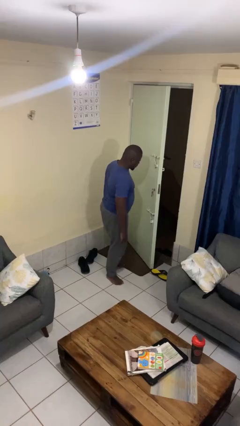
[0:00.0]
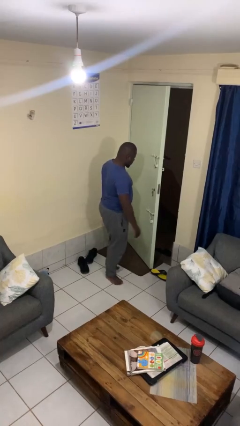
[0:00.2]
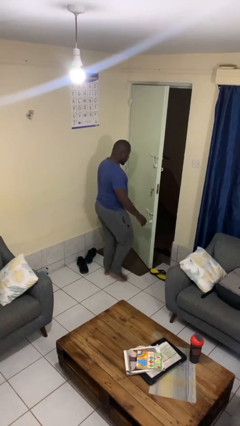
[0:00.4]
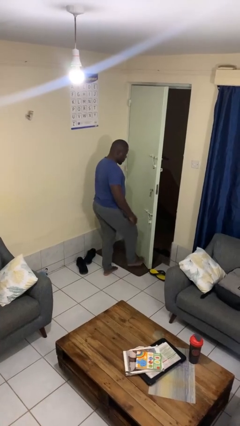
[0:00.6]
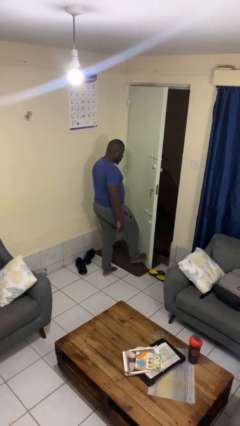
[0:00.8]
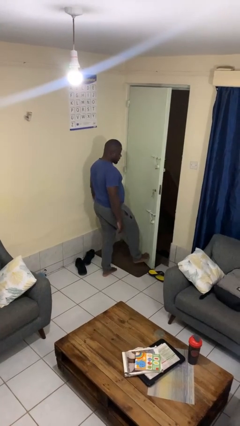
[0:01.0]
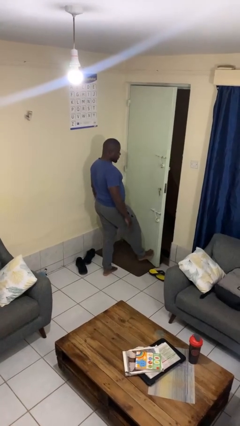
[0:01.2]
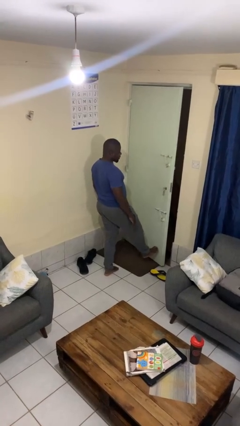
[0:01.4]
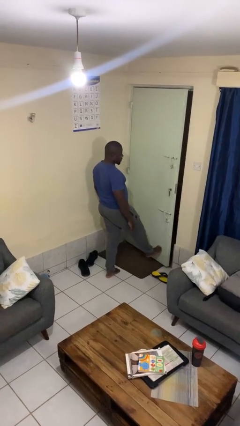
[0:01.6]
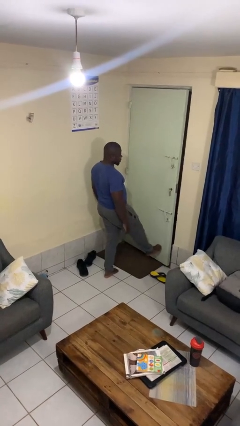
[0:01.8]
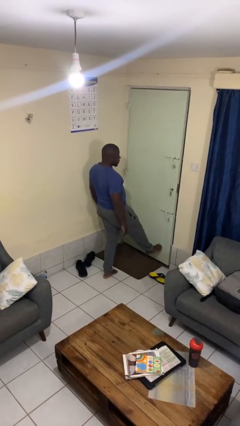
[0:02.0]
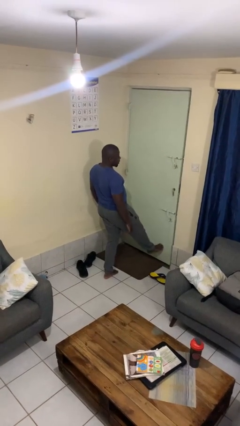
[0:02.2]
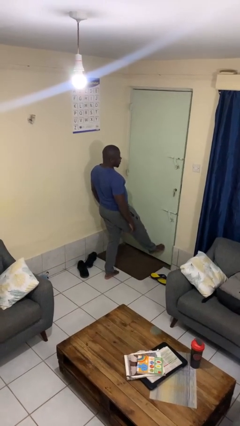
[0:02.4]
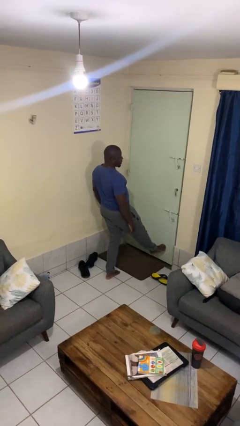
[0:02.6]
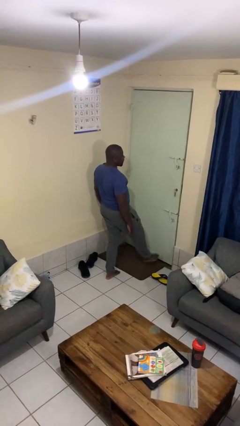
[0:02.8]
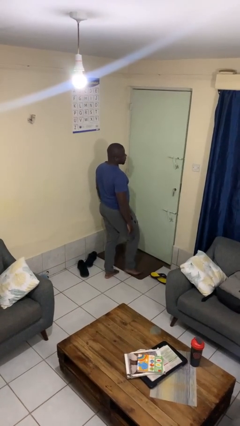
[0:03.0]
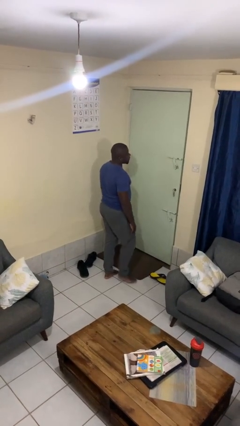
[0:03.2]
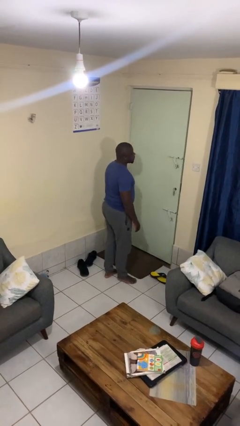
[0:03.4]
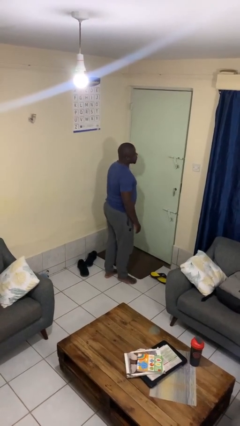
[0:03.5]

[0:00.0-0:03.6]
person closes door with foot

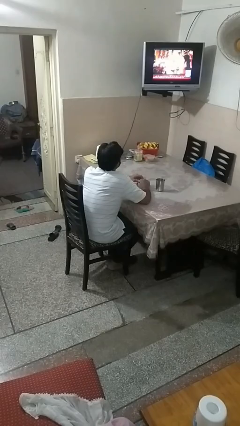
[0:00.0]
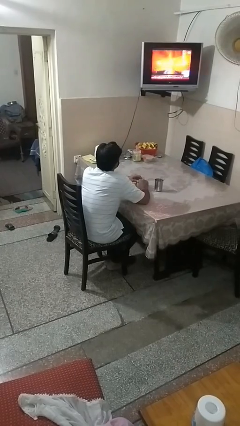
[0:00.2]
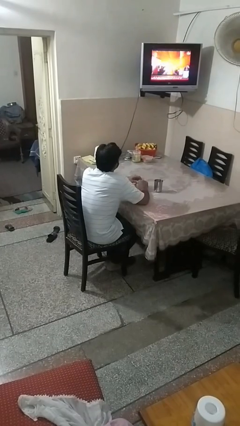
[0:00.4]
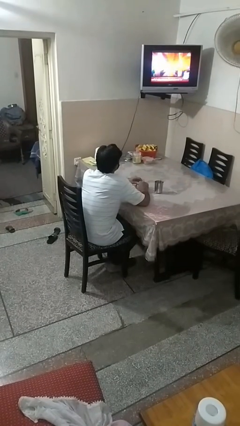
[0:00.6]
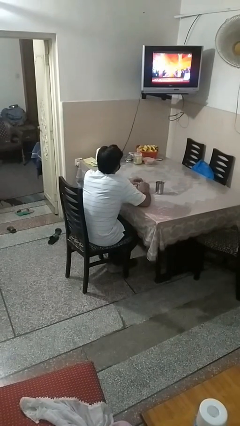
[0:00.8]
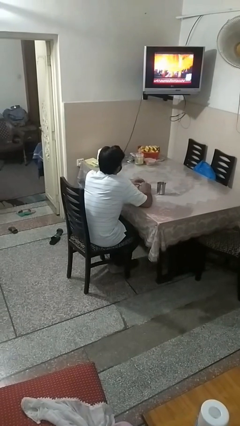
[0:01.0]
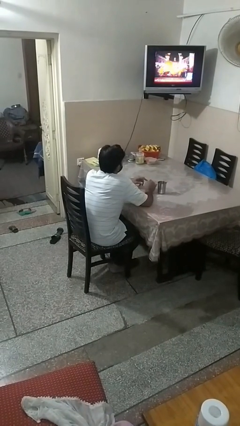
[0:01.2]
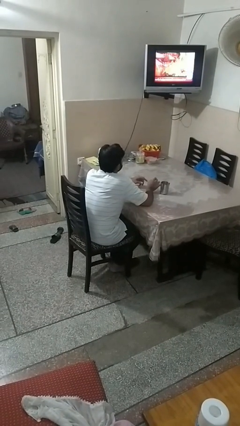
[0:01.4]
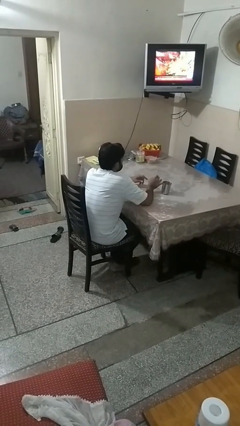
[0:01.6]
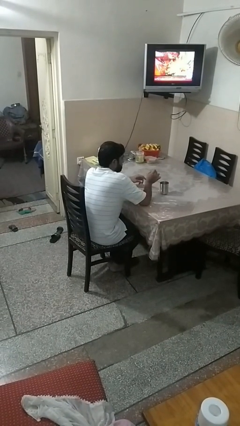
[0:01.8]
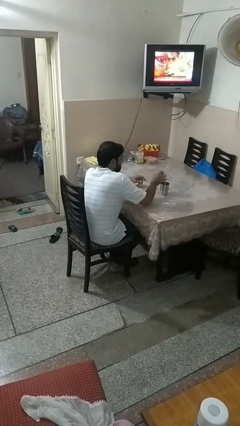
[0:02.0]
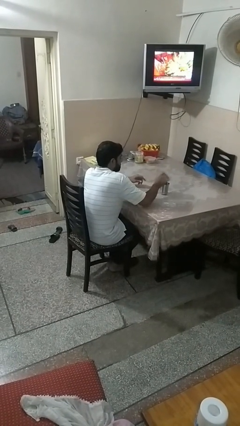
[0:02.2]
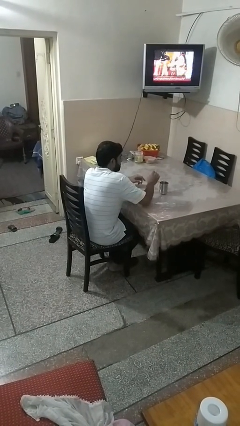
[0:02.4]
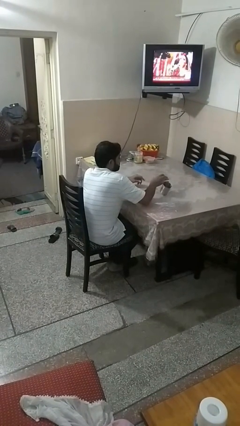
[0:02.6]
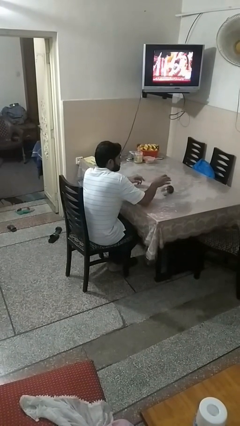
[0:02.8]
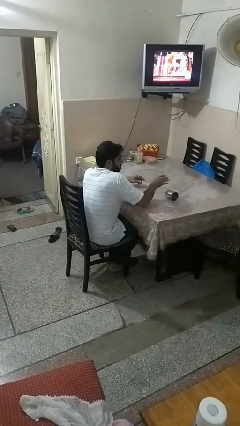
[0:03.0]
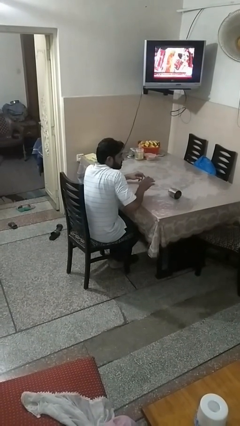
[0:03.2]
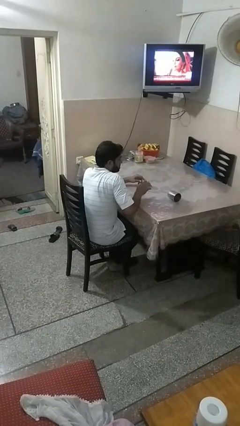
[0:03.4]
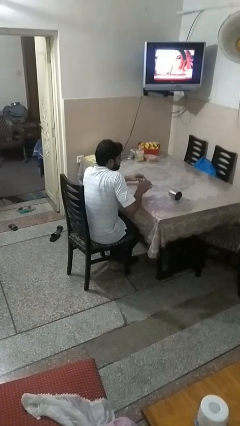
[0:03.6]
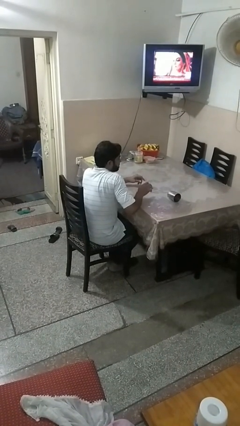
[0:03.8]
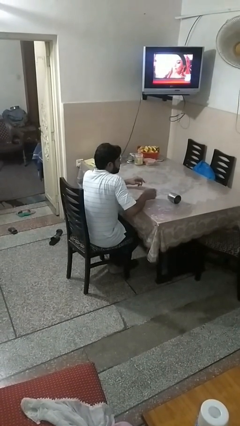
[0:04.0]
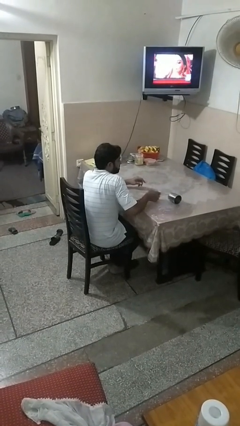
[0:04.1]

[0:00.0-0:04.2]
person knocks over glass

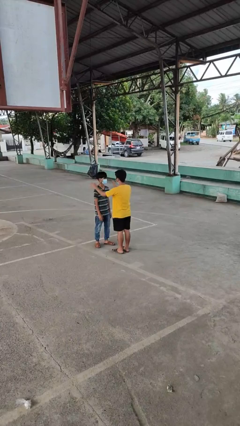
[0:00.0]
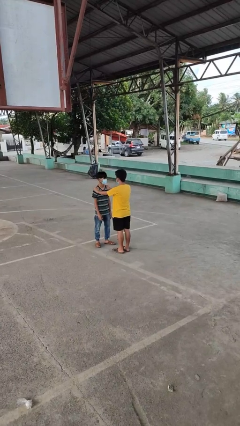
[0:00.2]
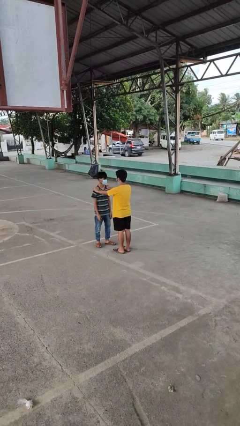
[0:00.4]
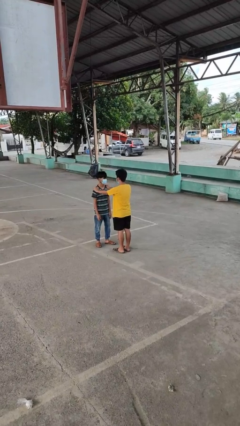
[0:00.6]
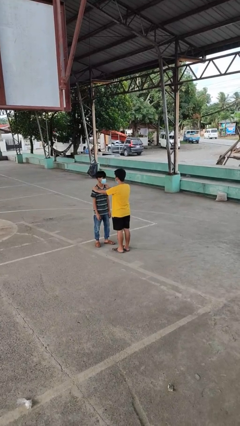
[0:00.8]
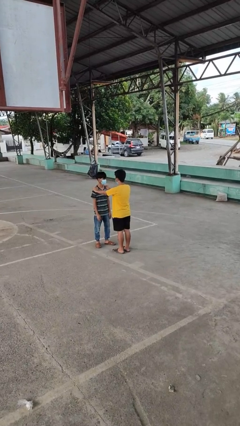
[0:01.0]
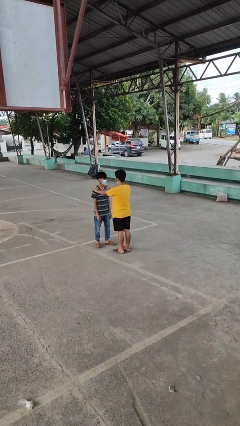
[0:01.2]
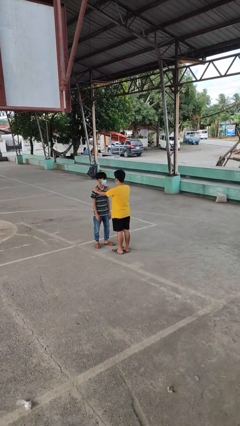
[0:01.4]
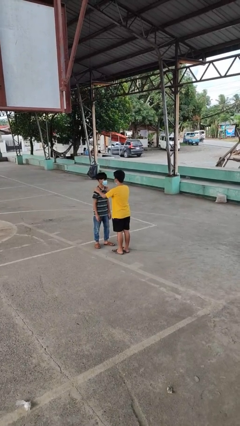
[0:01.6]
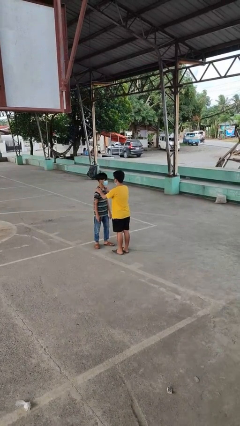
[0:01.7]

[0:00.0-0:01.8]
person grabs person by shoulder

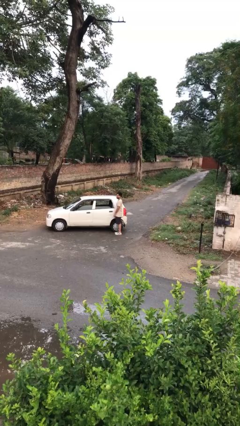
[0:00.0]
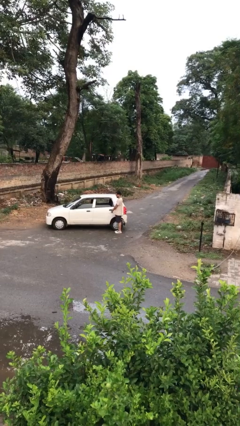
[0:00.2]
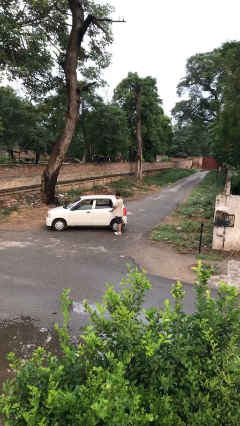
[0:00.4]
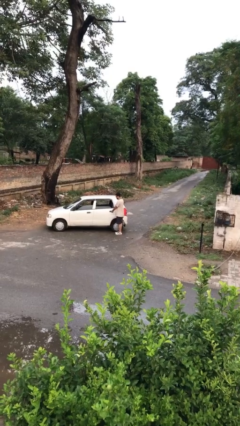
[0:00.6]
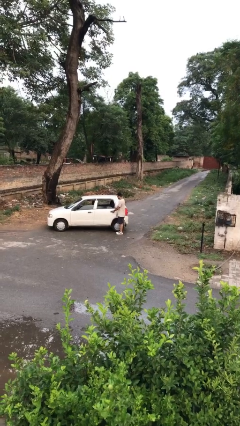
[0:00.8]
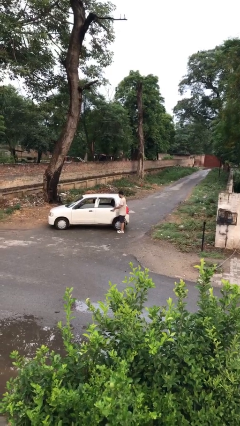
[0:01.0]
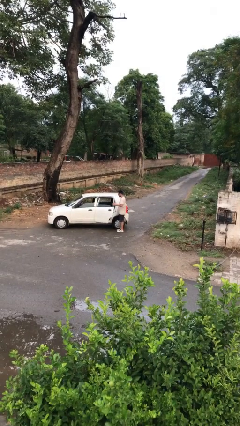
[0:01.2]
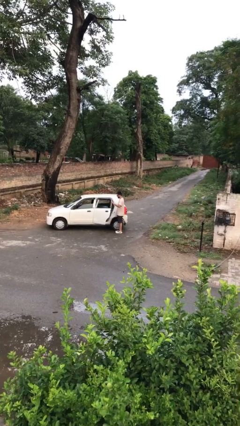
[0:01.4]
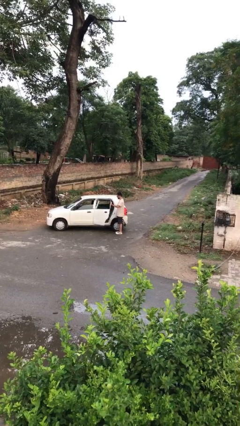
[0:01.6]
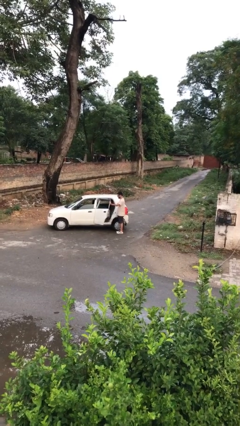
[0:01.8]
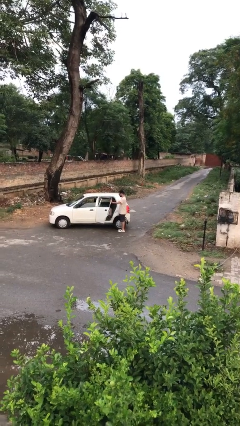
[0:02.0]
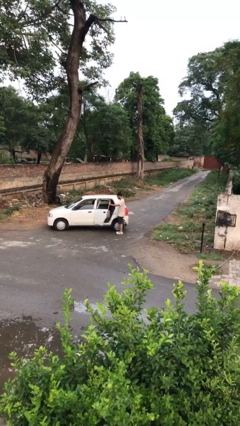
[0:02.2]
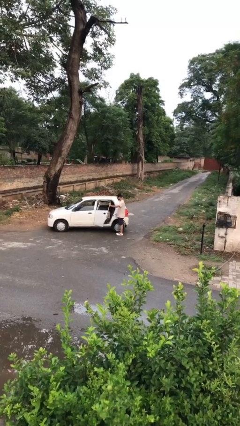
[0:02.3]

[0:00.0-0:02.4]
person opens car door

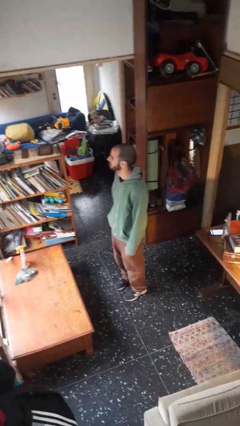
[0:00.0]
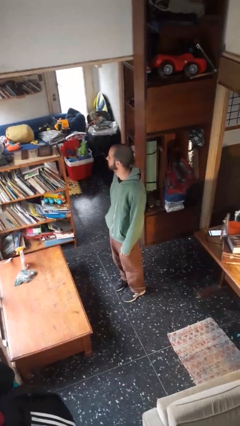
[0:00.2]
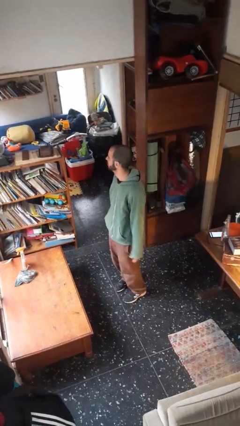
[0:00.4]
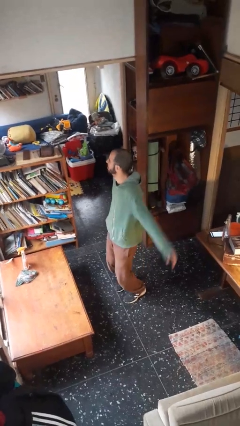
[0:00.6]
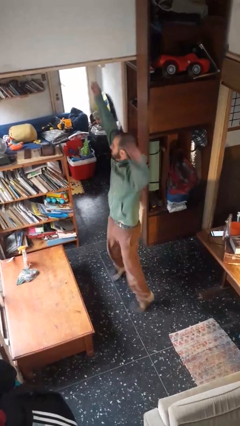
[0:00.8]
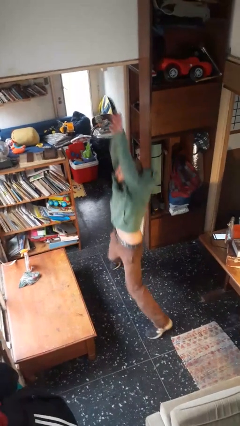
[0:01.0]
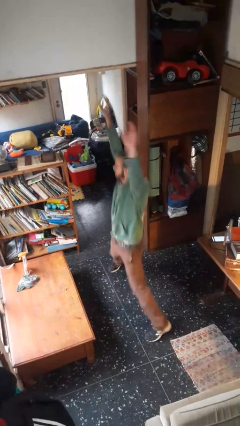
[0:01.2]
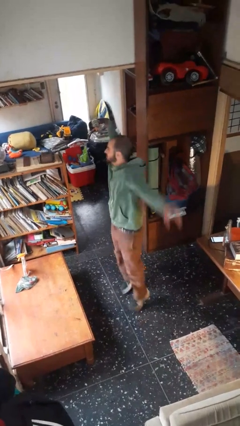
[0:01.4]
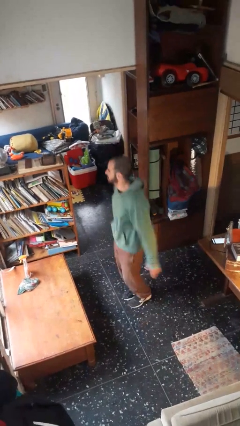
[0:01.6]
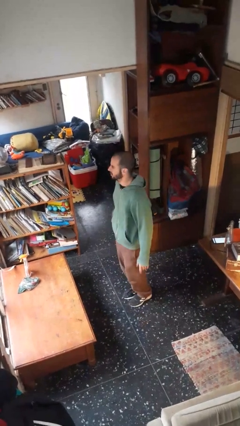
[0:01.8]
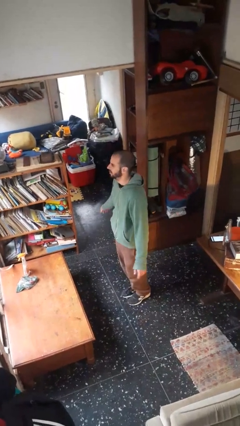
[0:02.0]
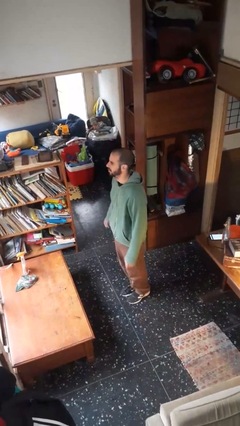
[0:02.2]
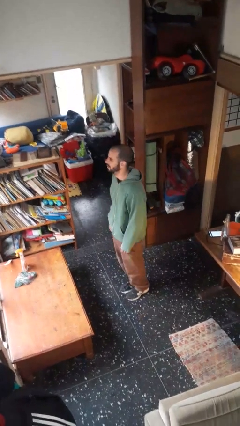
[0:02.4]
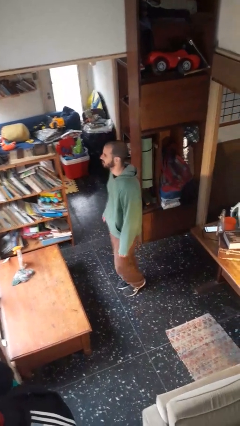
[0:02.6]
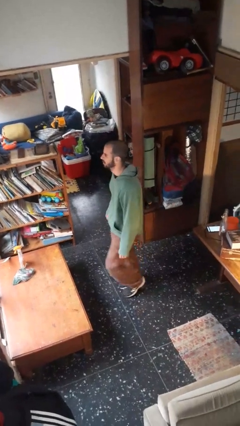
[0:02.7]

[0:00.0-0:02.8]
person exercises with jumping jacks

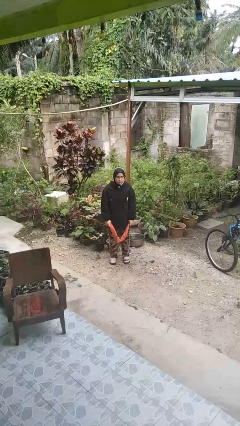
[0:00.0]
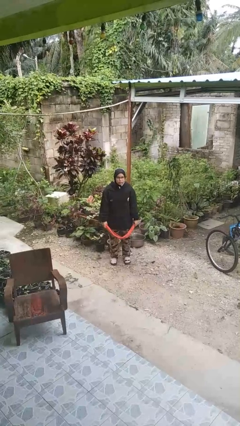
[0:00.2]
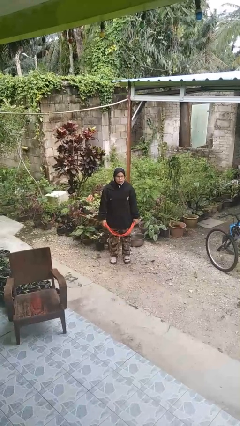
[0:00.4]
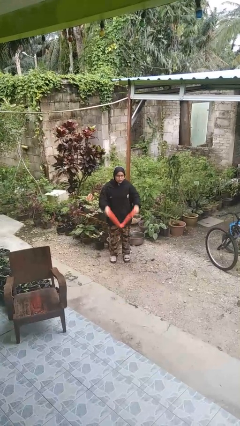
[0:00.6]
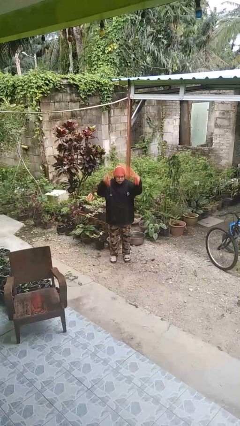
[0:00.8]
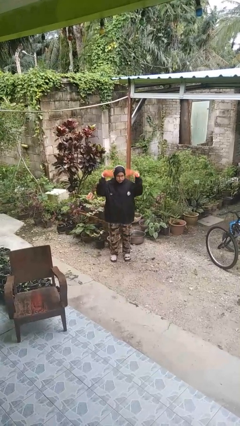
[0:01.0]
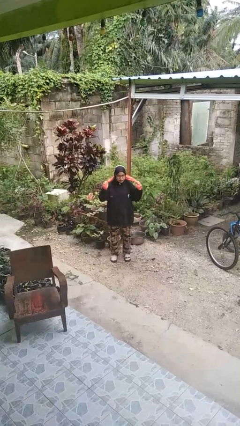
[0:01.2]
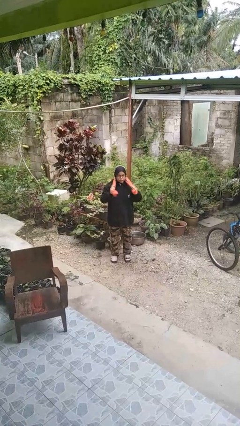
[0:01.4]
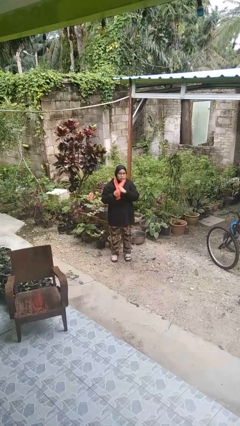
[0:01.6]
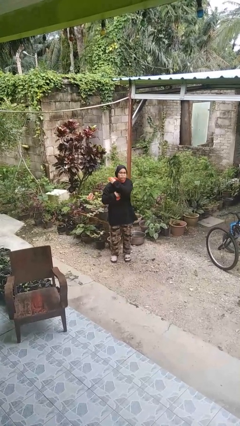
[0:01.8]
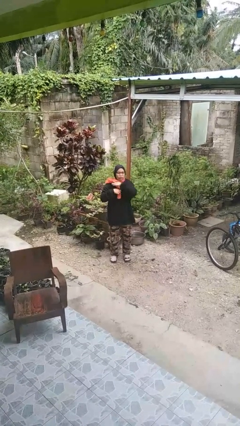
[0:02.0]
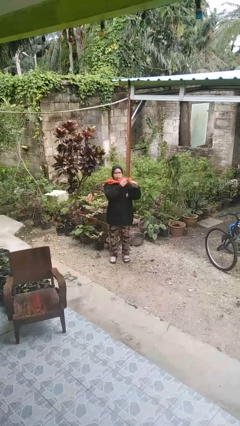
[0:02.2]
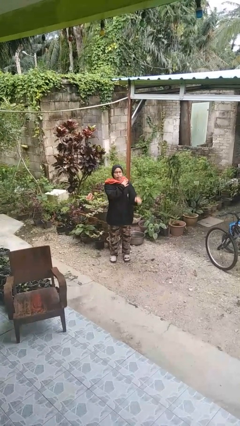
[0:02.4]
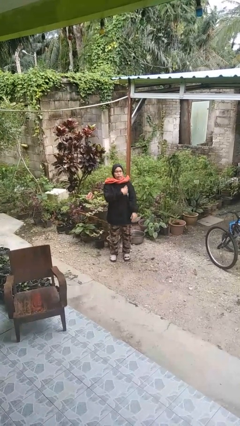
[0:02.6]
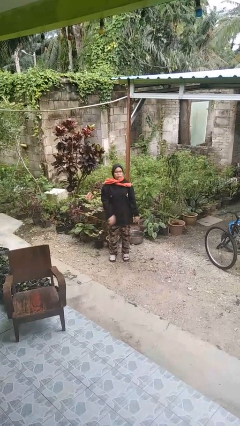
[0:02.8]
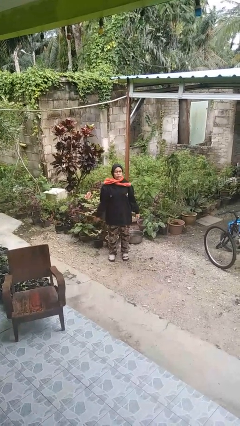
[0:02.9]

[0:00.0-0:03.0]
person puts on scarf
